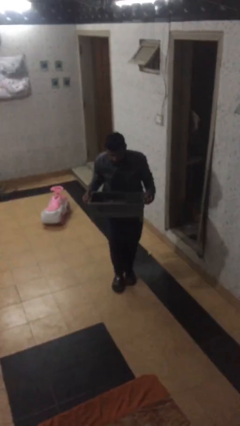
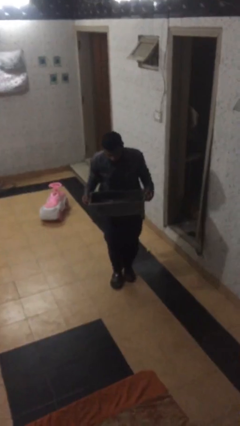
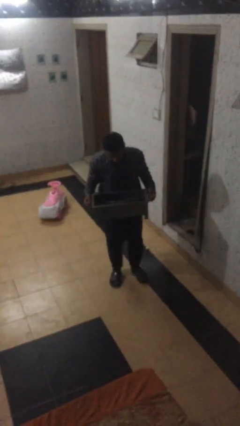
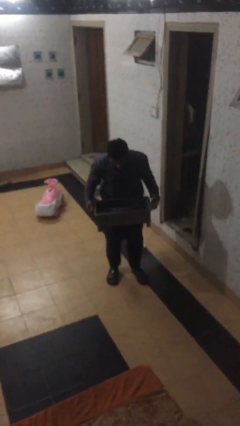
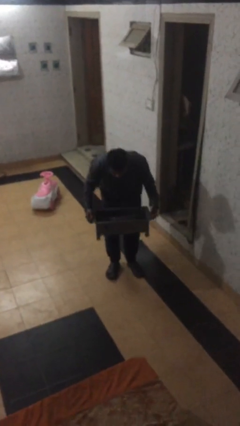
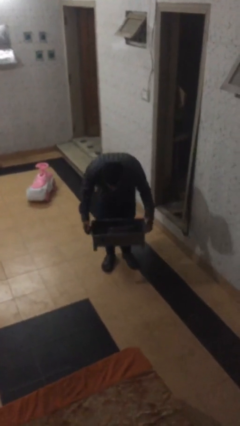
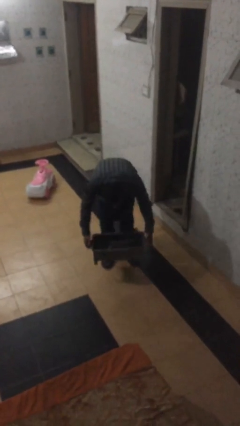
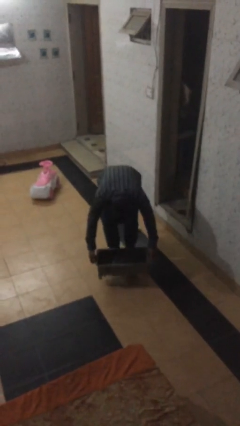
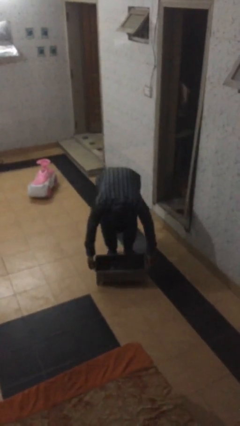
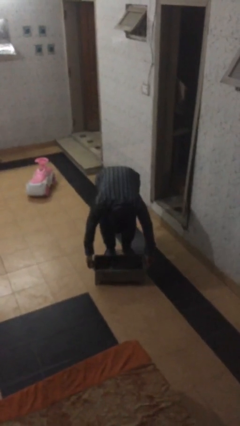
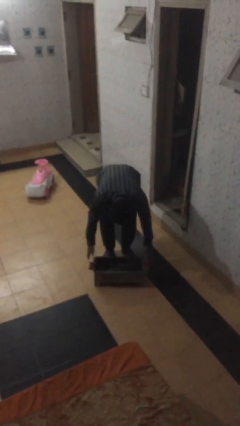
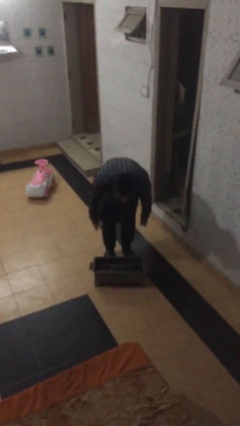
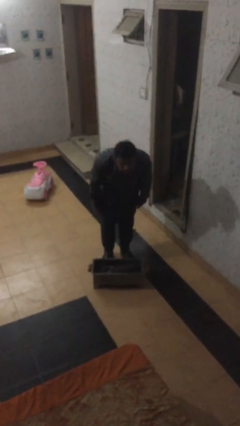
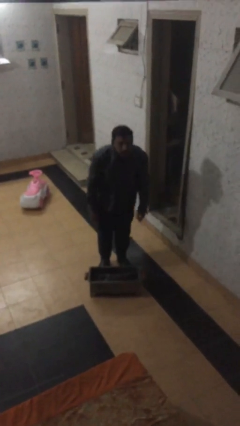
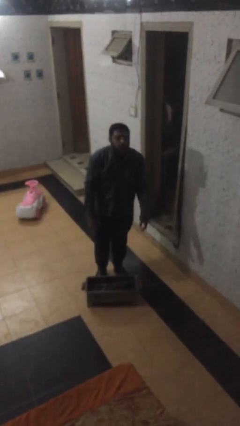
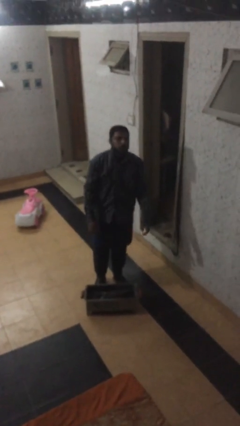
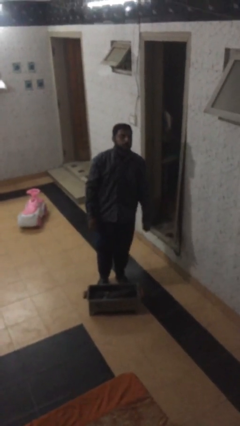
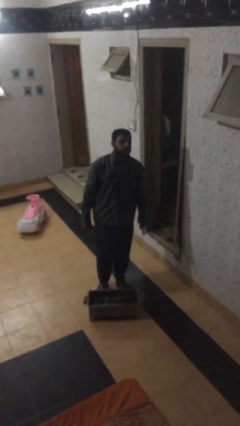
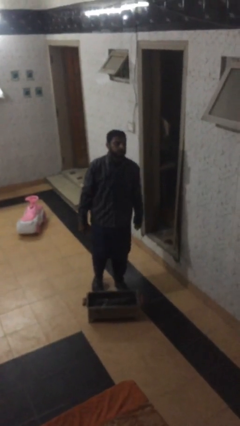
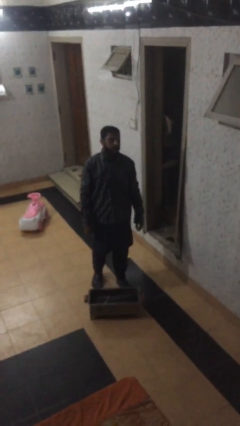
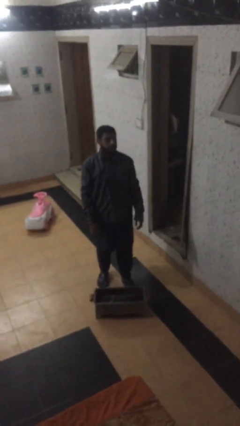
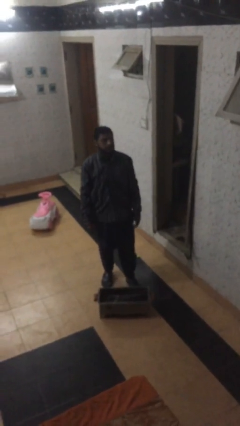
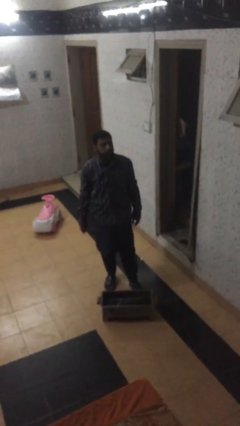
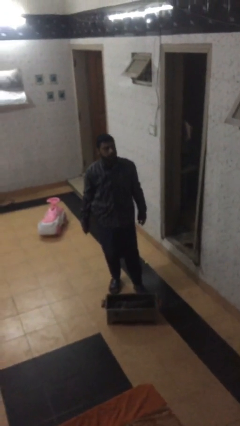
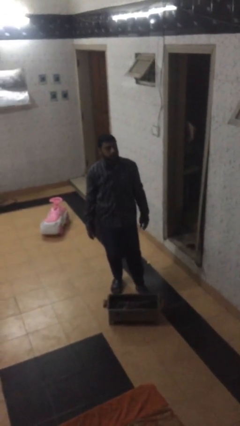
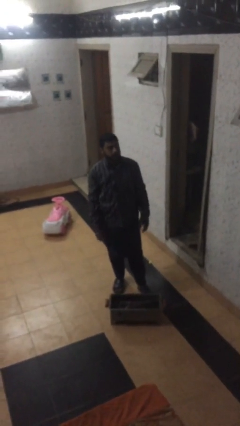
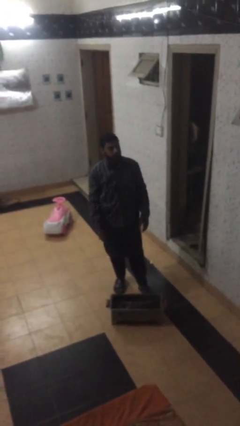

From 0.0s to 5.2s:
person puts down object on floor

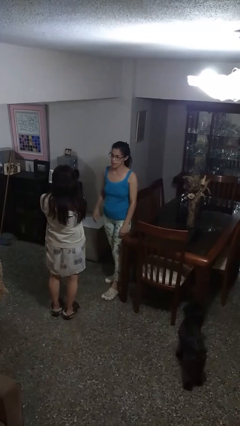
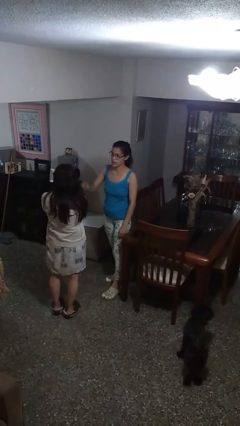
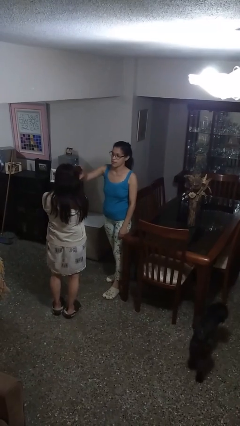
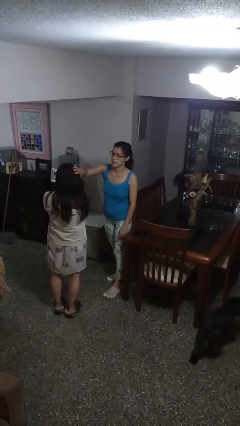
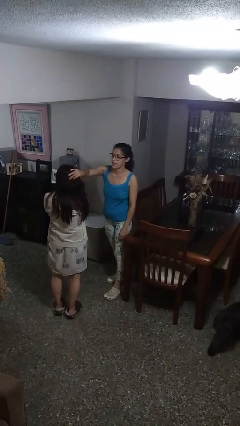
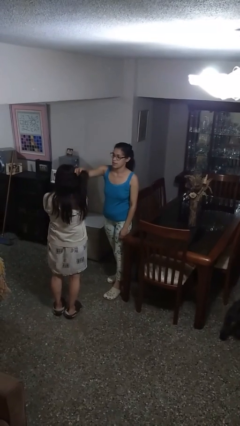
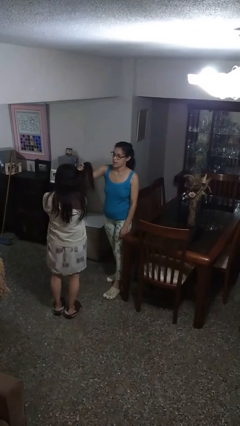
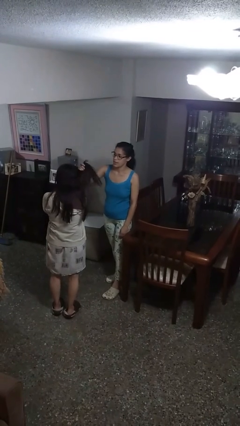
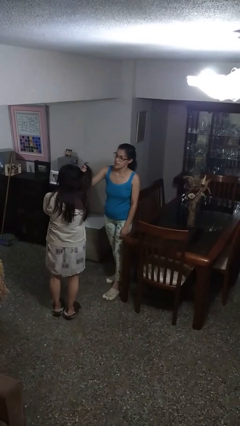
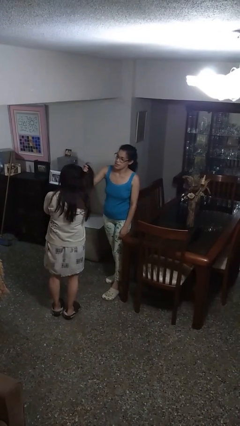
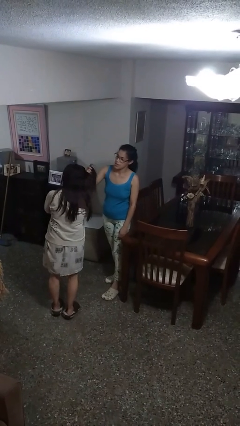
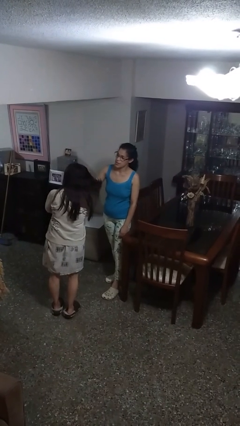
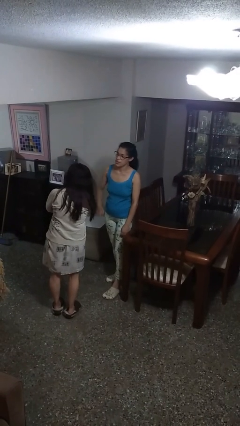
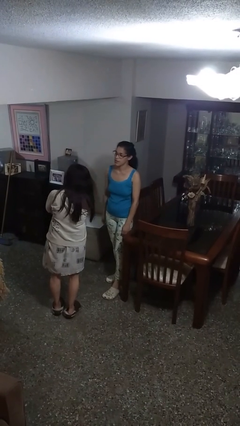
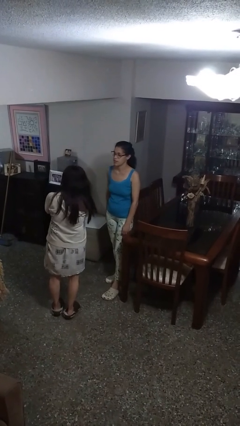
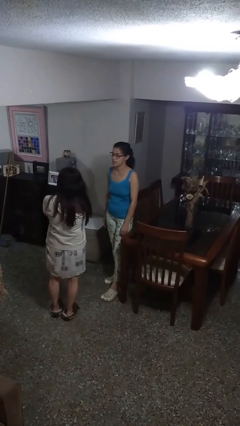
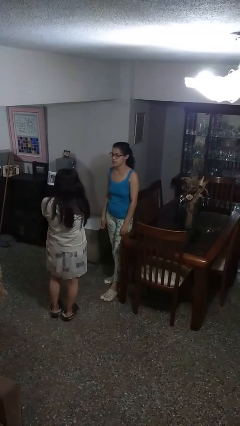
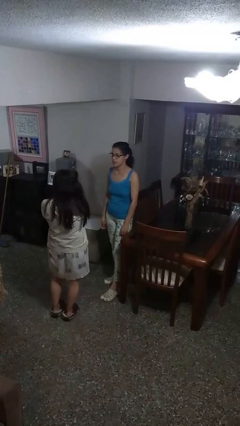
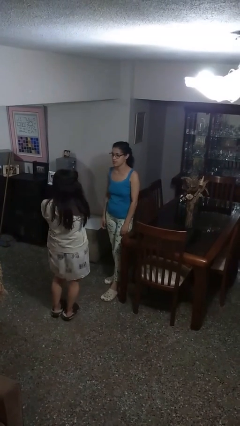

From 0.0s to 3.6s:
person grabs person by hair

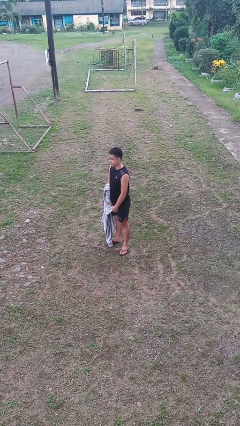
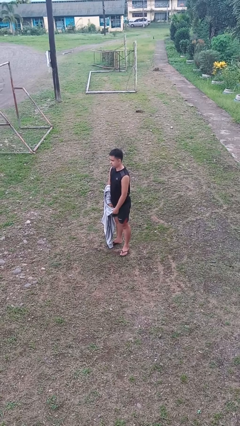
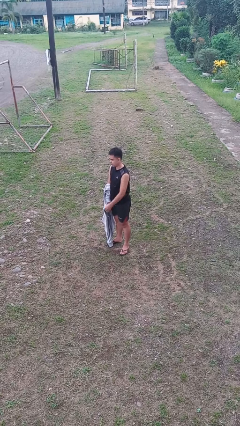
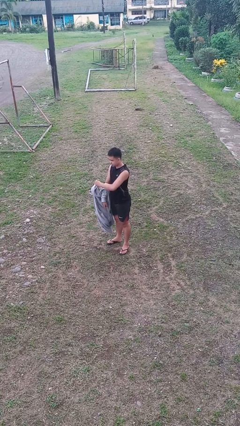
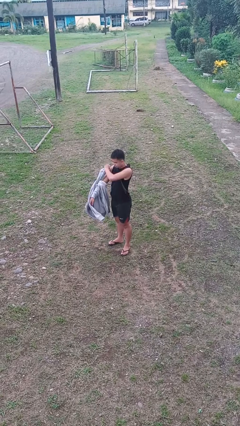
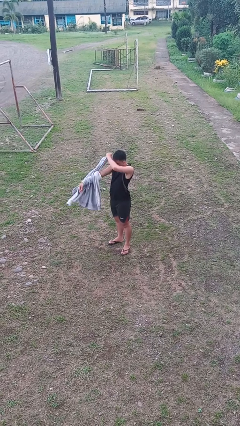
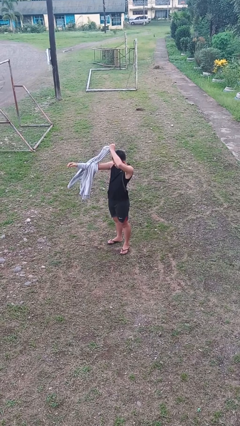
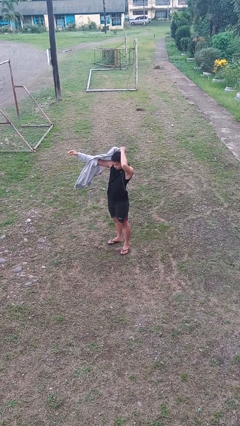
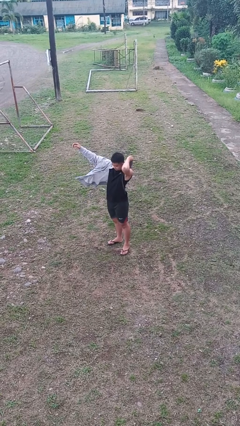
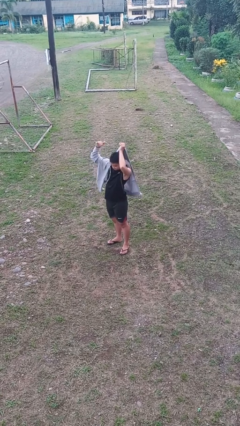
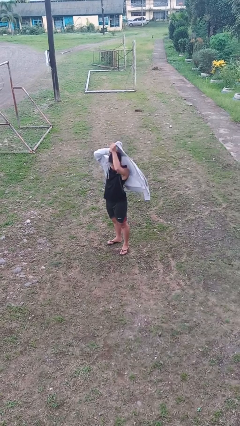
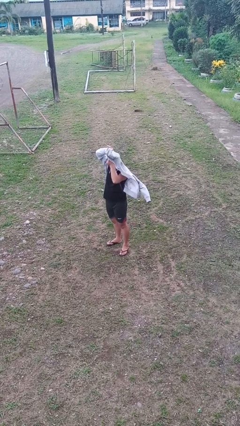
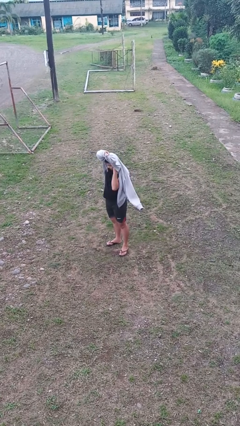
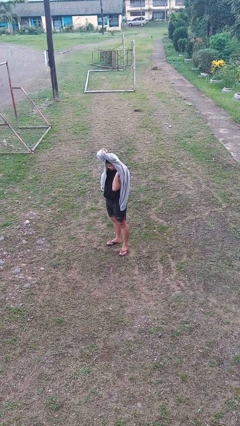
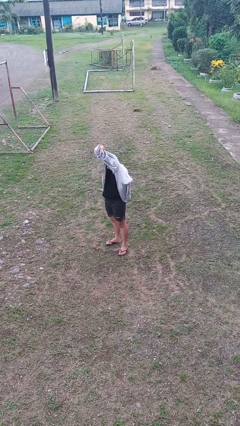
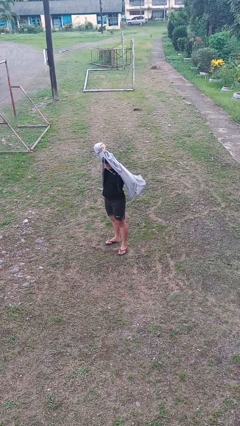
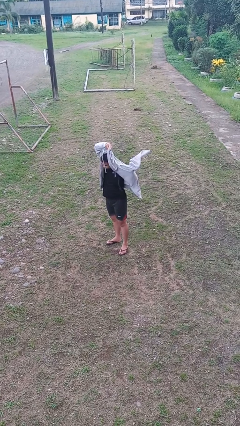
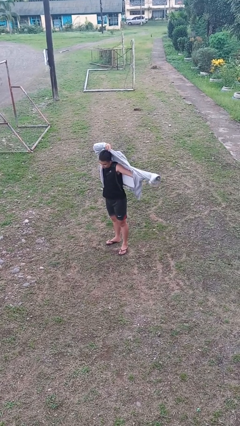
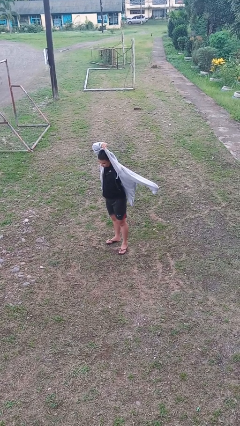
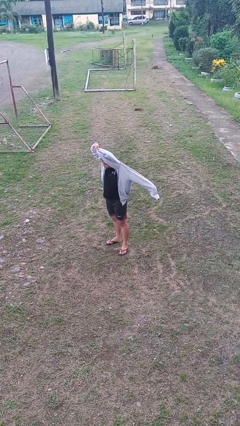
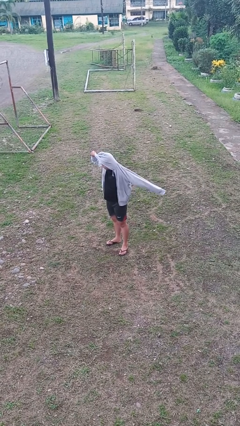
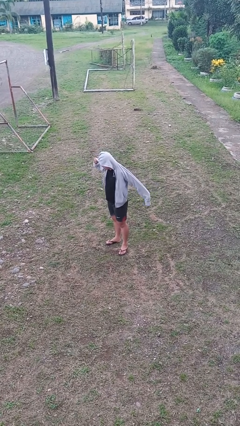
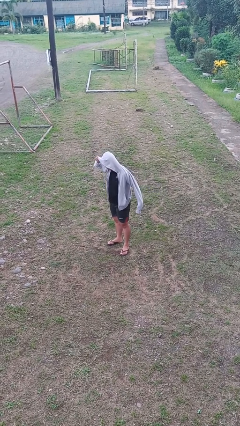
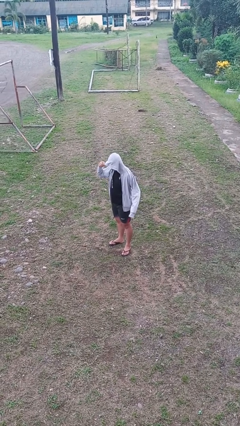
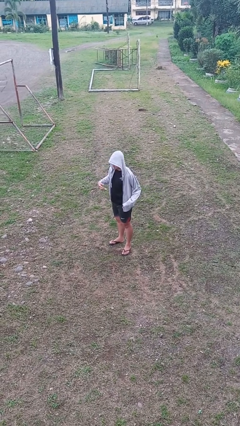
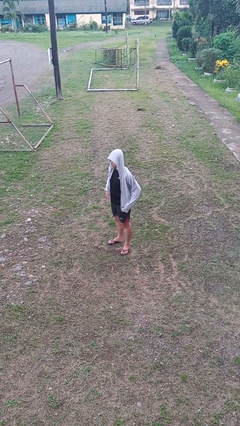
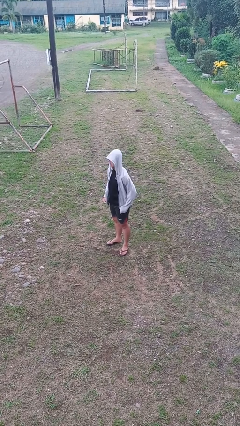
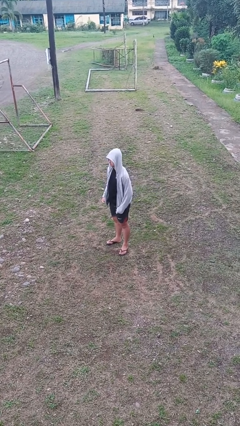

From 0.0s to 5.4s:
person puts on hoodie

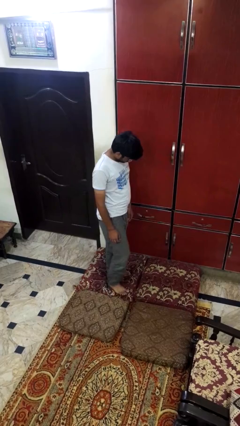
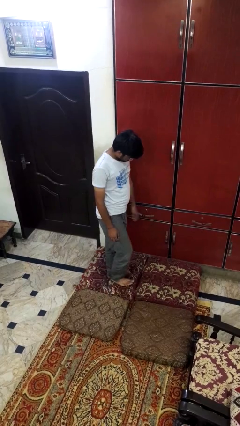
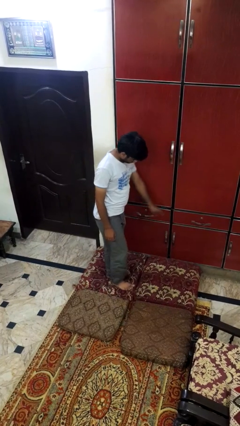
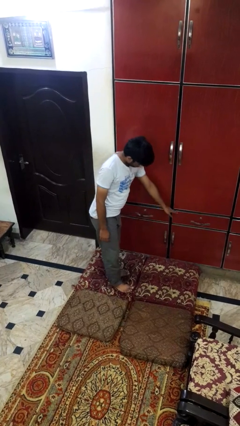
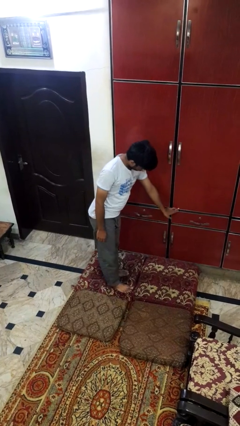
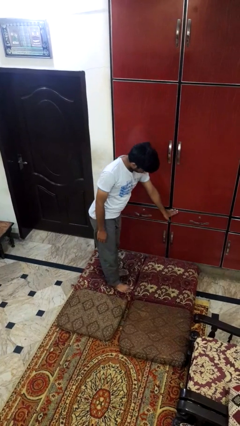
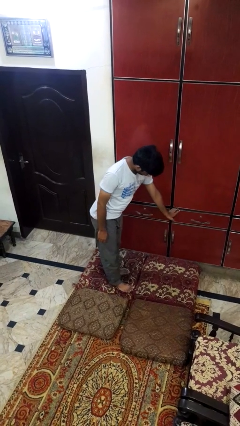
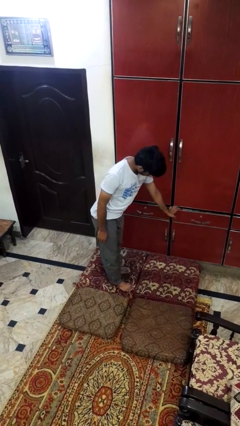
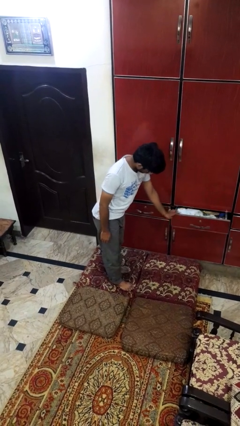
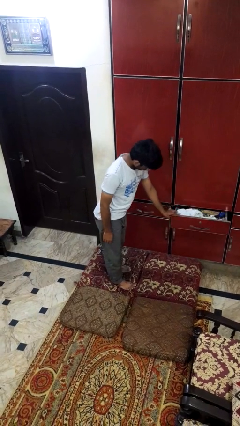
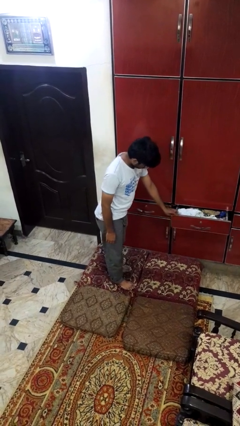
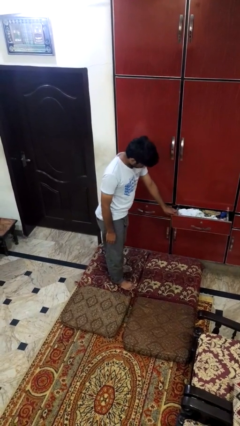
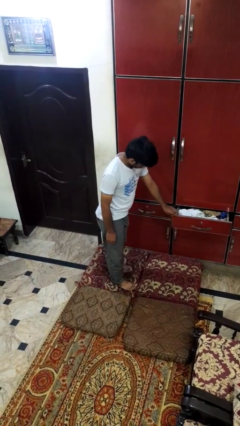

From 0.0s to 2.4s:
person opens dresser drawer

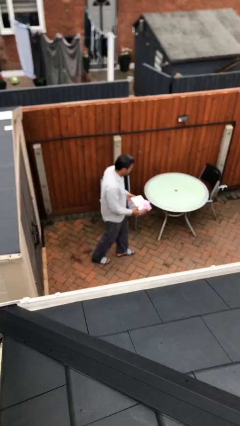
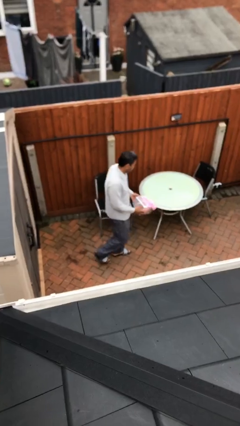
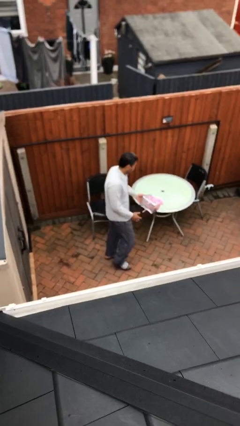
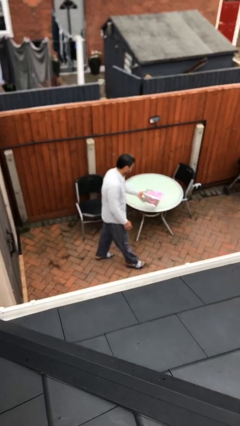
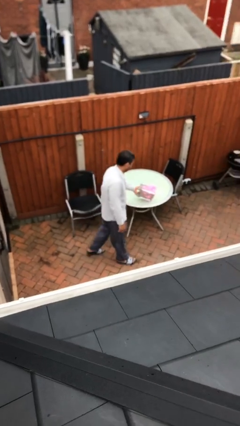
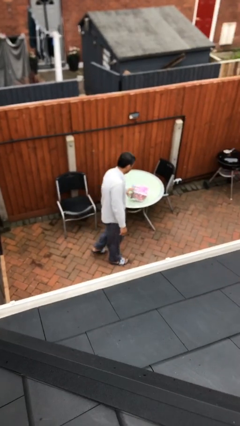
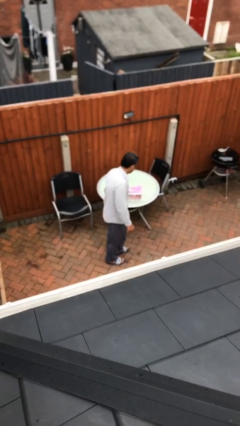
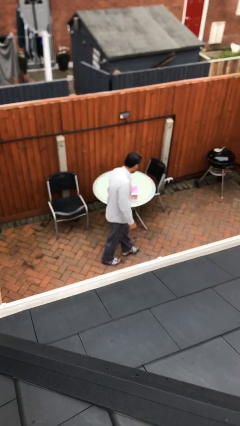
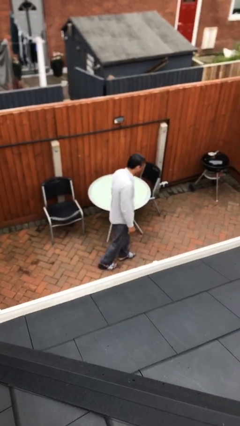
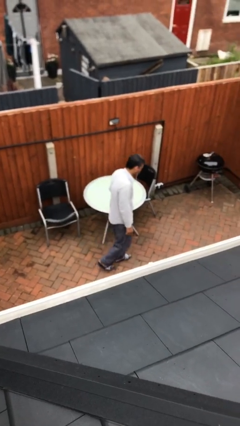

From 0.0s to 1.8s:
person puts down object on table
